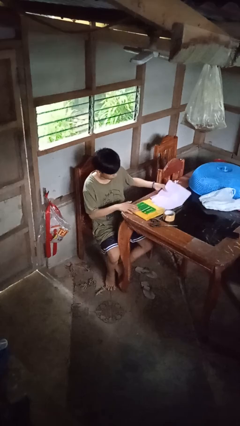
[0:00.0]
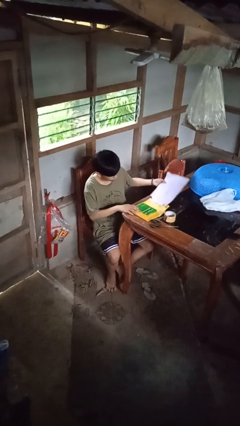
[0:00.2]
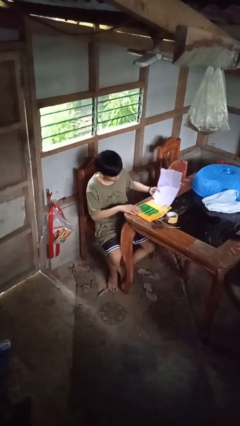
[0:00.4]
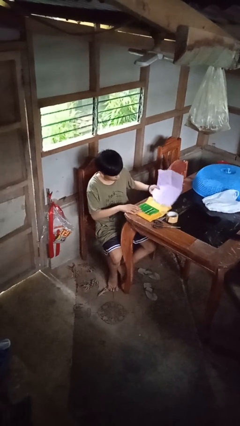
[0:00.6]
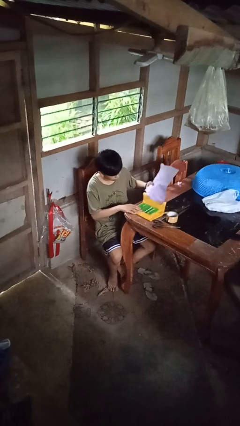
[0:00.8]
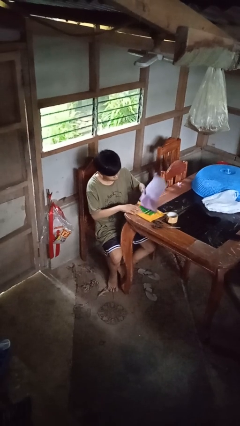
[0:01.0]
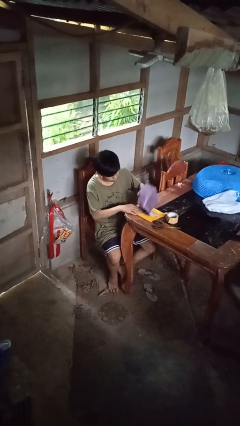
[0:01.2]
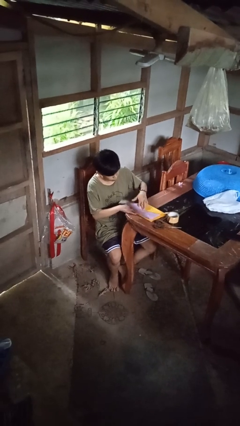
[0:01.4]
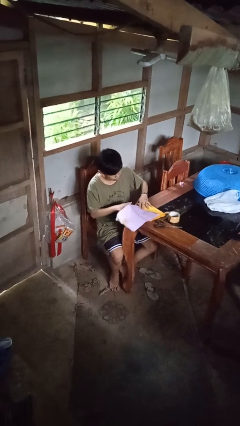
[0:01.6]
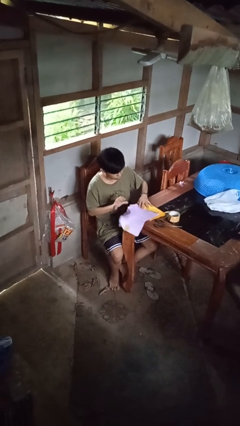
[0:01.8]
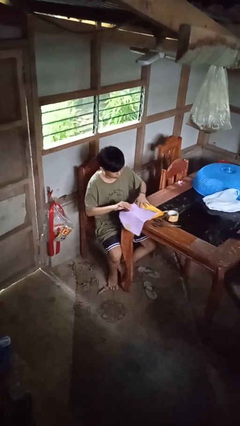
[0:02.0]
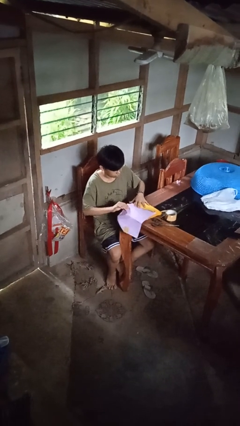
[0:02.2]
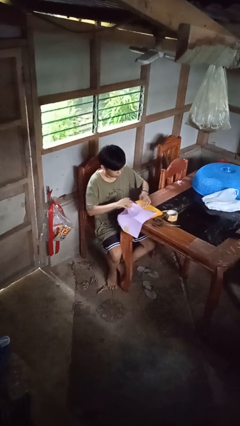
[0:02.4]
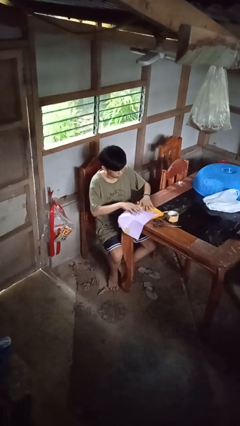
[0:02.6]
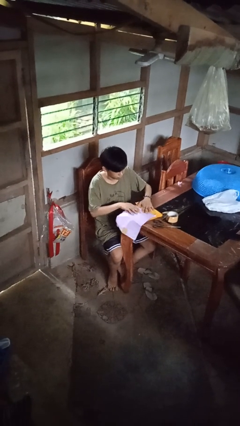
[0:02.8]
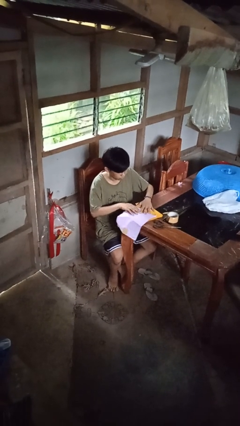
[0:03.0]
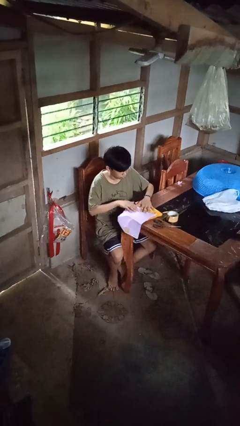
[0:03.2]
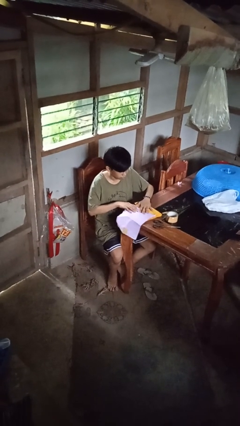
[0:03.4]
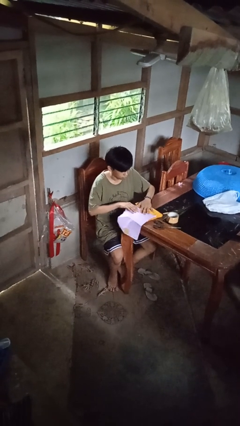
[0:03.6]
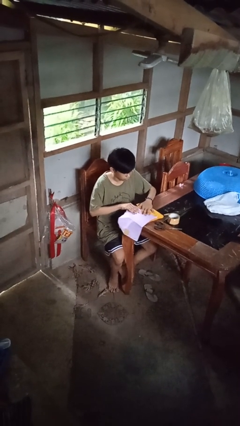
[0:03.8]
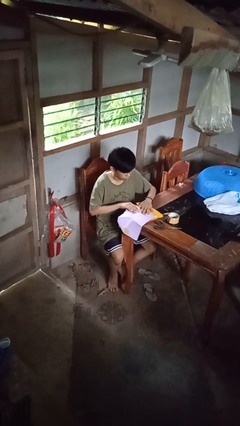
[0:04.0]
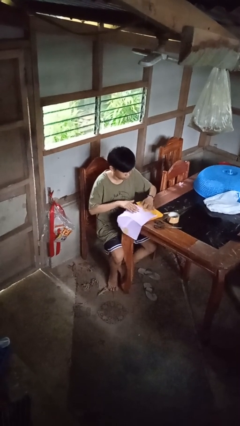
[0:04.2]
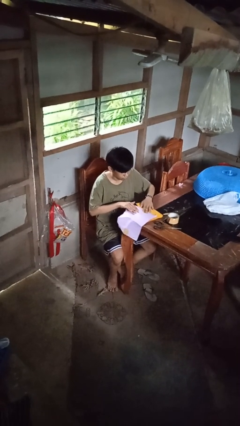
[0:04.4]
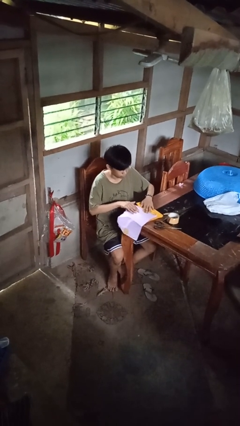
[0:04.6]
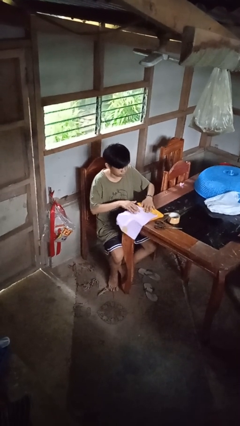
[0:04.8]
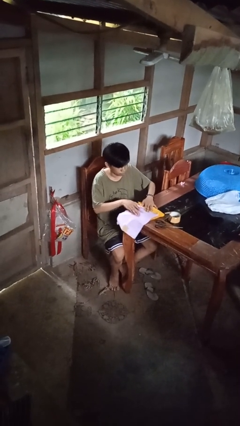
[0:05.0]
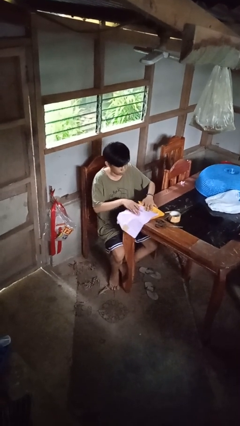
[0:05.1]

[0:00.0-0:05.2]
person wraps box

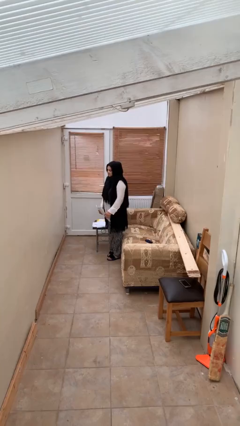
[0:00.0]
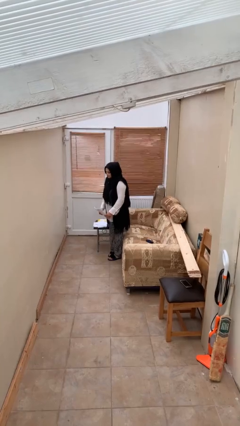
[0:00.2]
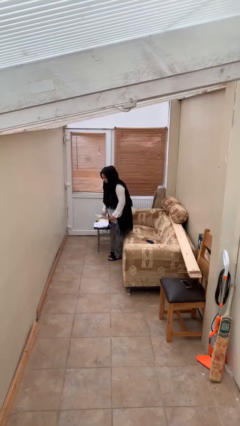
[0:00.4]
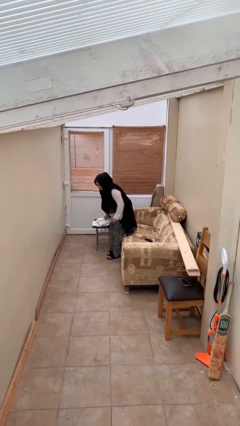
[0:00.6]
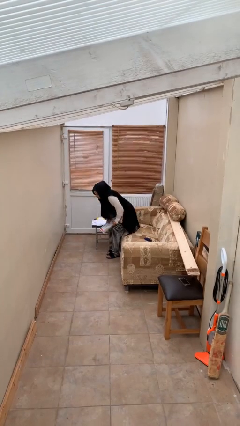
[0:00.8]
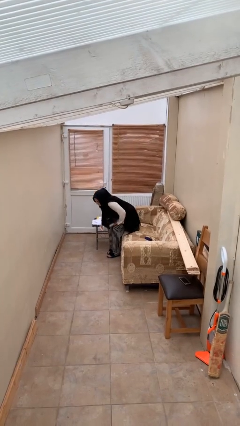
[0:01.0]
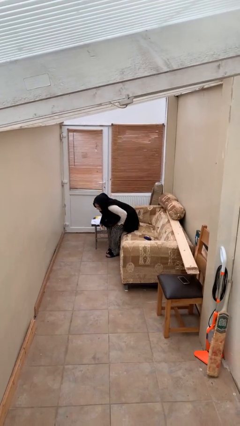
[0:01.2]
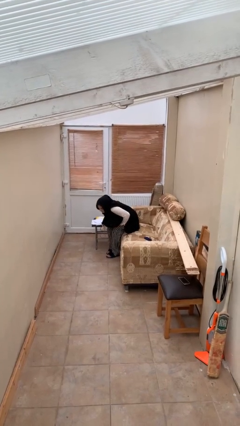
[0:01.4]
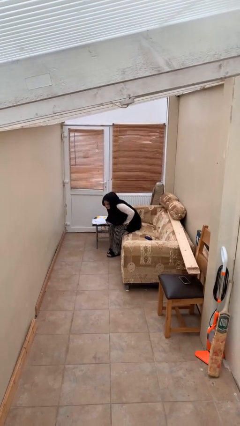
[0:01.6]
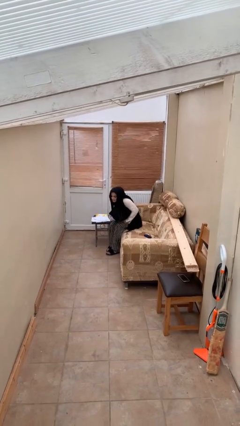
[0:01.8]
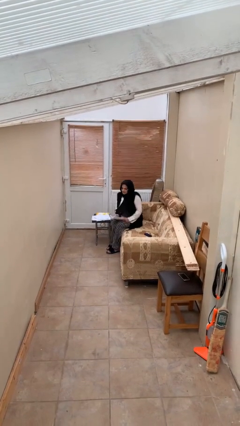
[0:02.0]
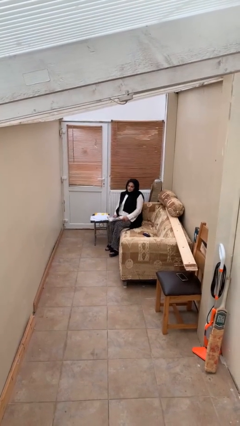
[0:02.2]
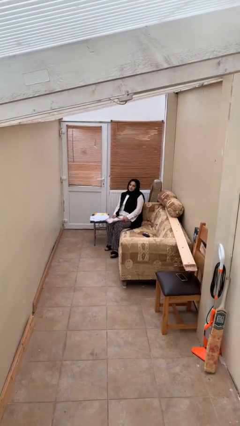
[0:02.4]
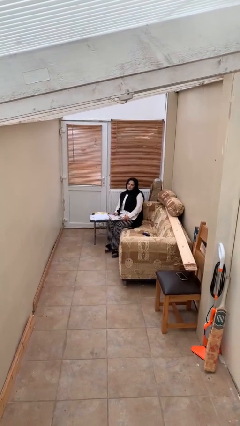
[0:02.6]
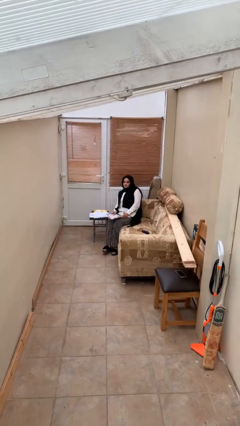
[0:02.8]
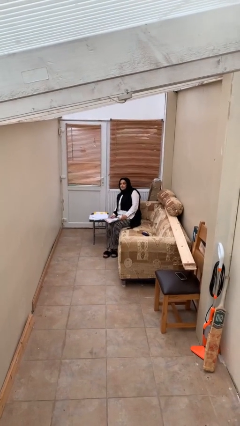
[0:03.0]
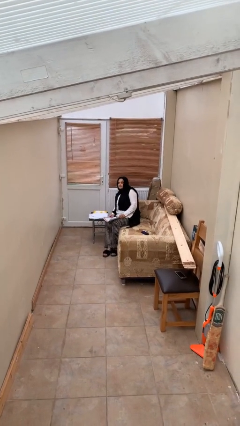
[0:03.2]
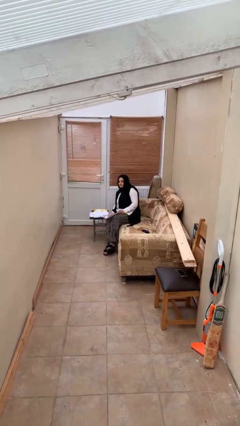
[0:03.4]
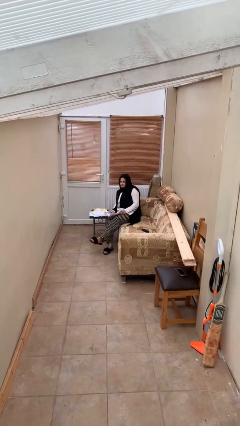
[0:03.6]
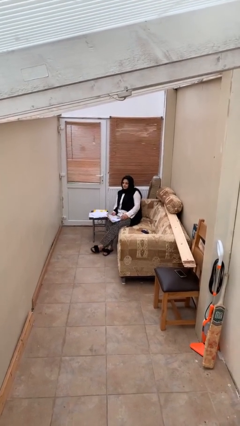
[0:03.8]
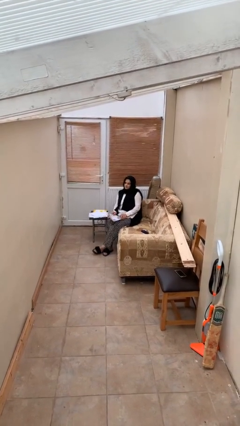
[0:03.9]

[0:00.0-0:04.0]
person sits down

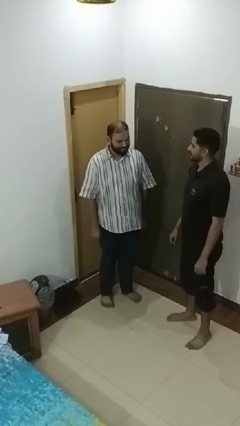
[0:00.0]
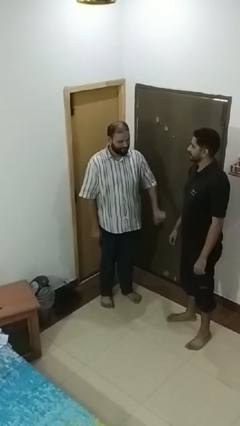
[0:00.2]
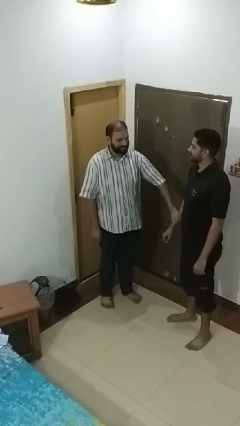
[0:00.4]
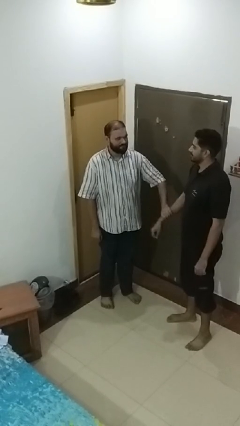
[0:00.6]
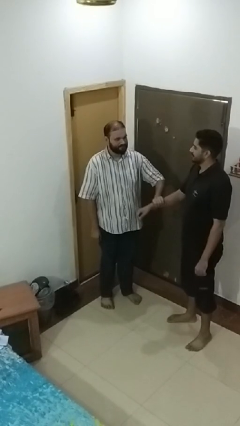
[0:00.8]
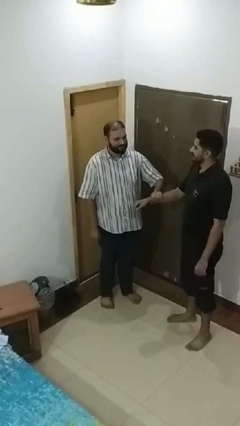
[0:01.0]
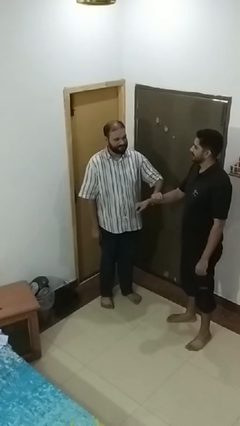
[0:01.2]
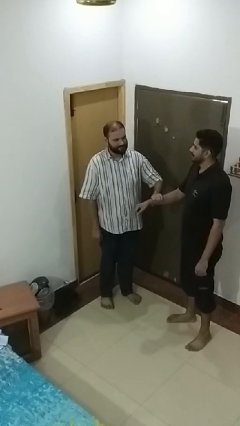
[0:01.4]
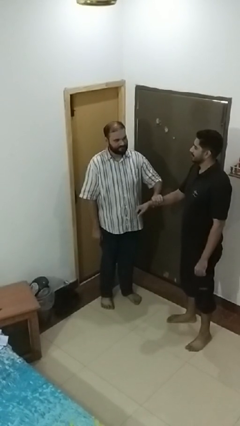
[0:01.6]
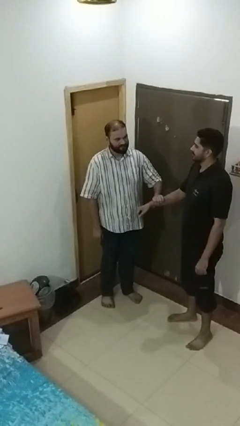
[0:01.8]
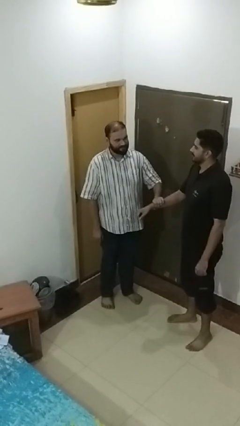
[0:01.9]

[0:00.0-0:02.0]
person grabs person by forearm

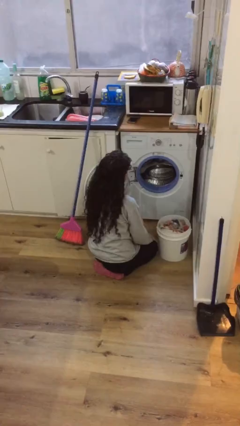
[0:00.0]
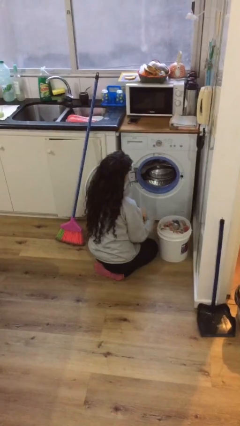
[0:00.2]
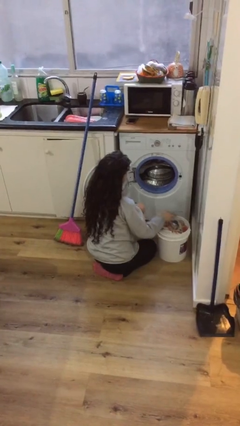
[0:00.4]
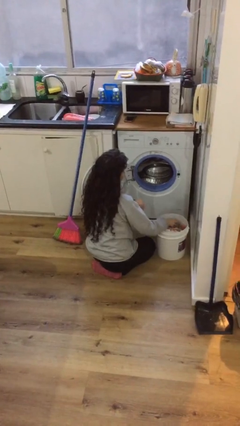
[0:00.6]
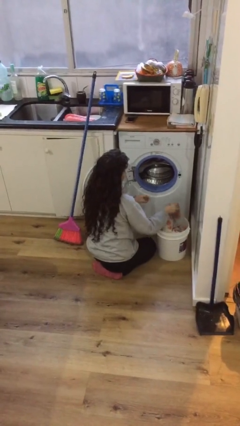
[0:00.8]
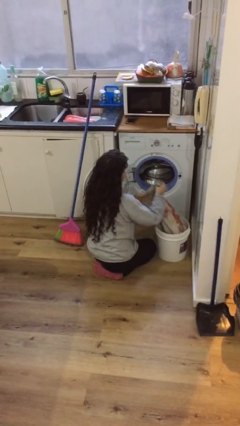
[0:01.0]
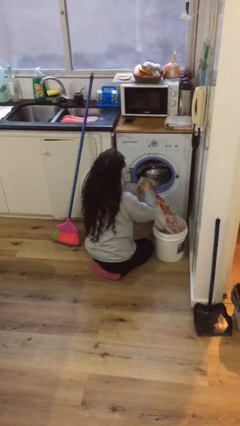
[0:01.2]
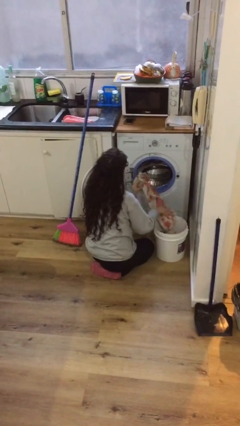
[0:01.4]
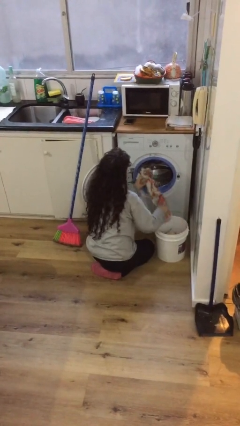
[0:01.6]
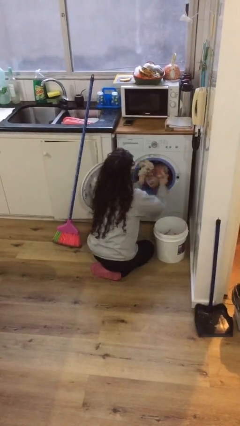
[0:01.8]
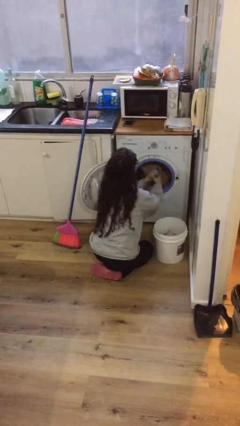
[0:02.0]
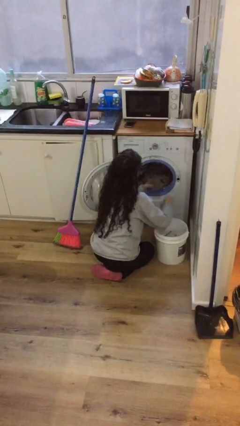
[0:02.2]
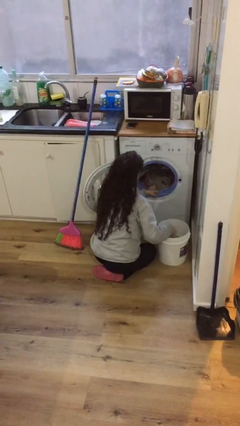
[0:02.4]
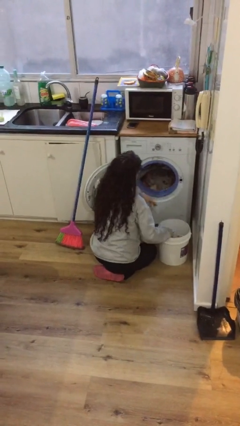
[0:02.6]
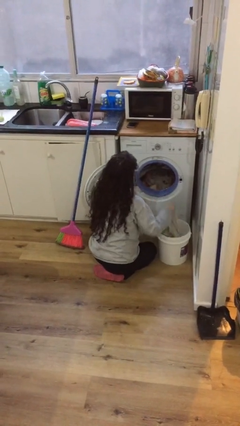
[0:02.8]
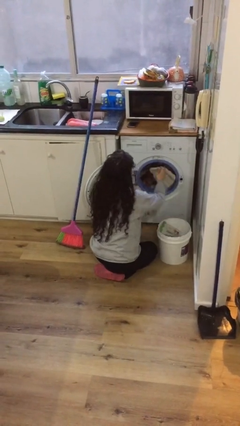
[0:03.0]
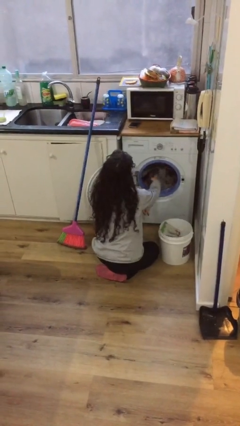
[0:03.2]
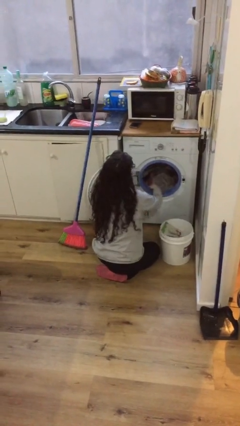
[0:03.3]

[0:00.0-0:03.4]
person loads clotheswasher

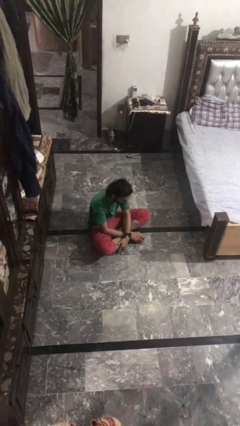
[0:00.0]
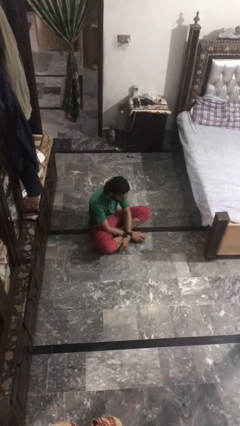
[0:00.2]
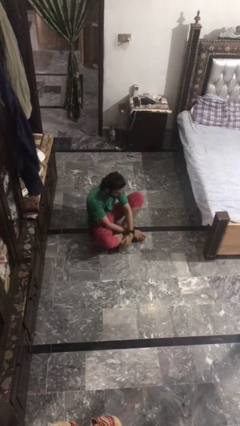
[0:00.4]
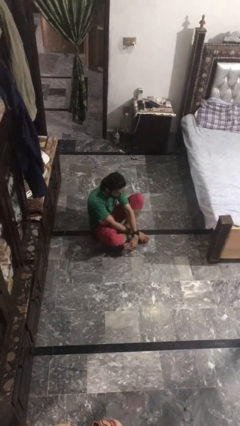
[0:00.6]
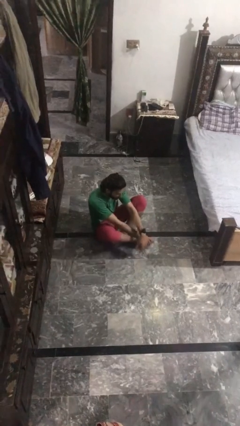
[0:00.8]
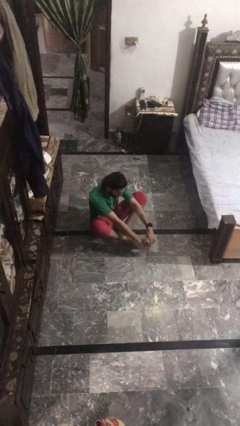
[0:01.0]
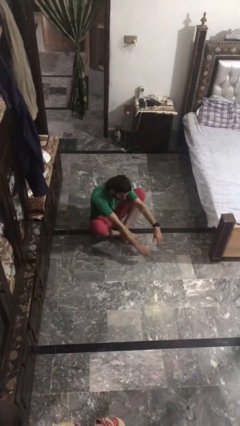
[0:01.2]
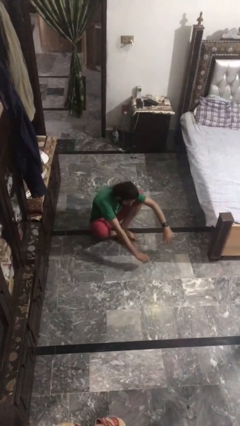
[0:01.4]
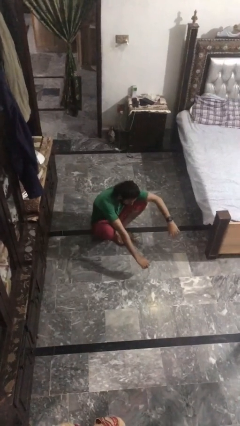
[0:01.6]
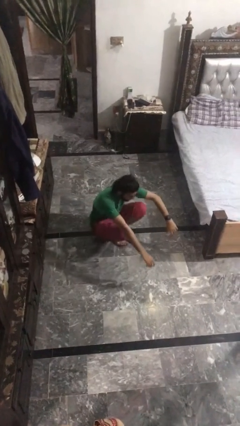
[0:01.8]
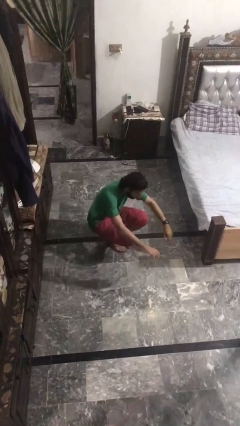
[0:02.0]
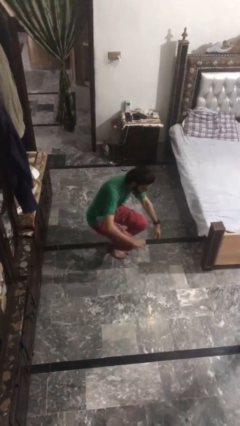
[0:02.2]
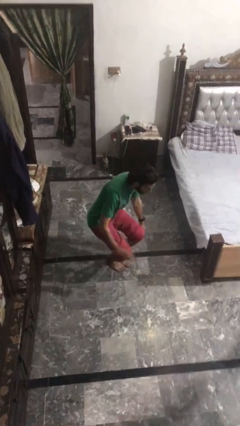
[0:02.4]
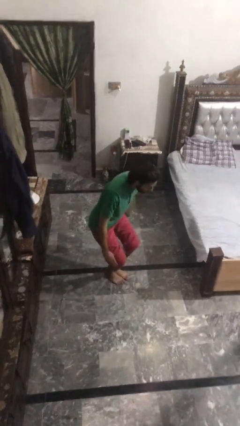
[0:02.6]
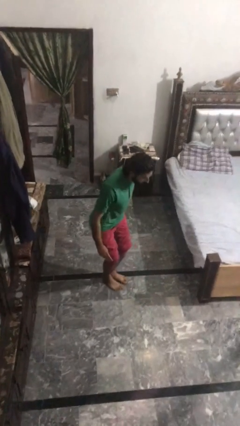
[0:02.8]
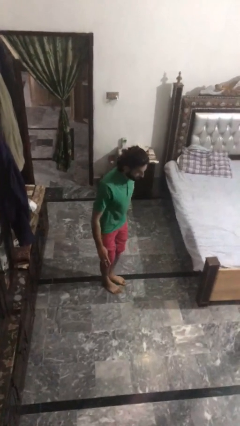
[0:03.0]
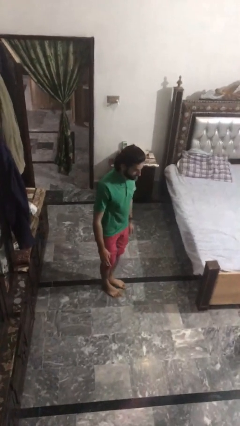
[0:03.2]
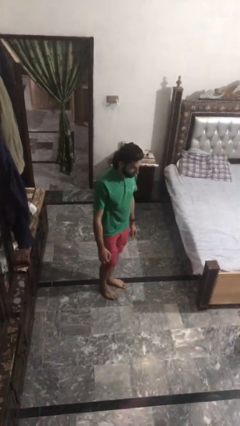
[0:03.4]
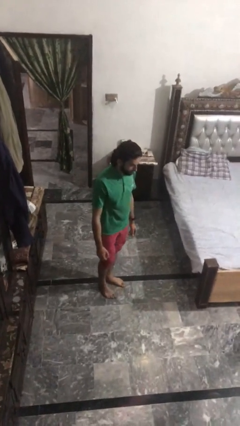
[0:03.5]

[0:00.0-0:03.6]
person stands up from floor
